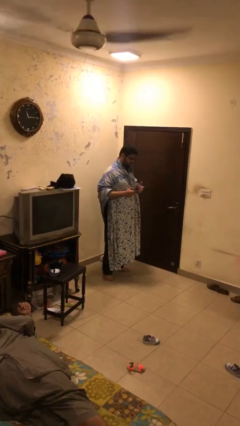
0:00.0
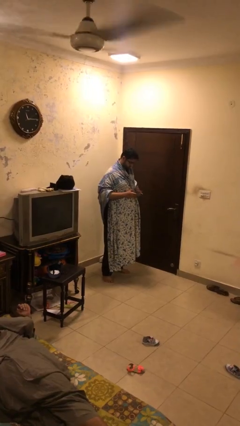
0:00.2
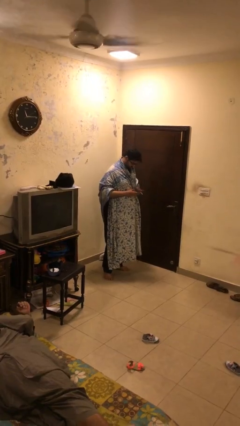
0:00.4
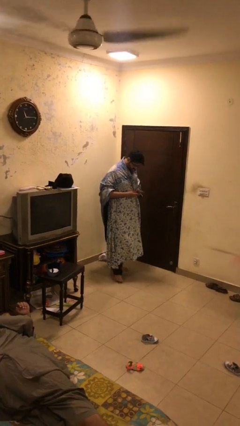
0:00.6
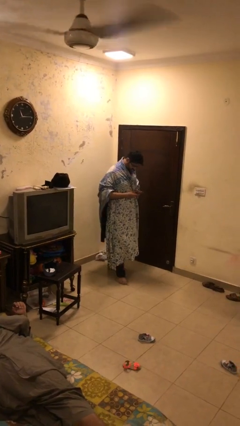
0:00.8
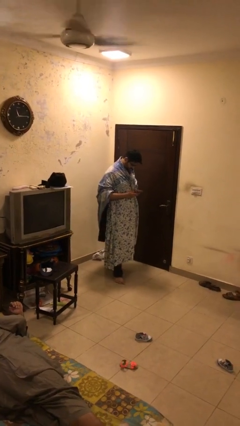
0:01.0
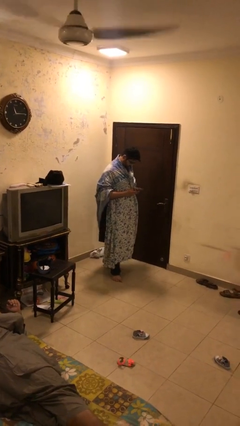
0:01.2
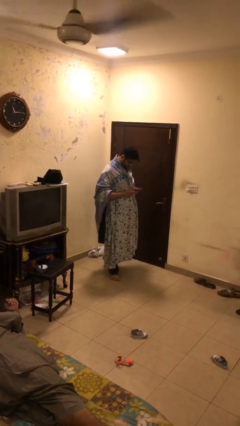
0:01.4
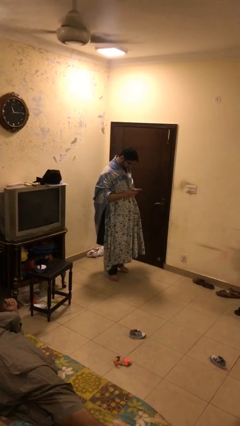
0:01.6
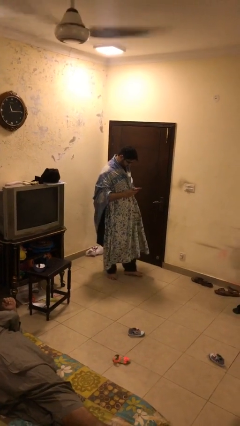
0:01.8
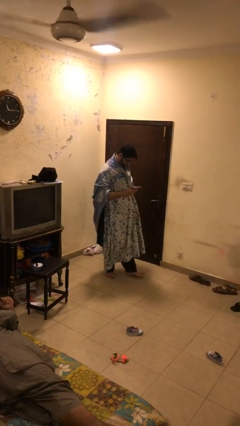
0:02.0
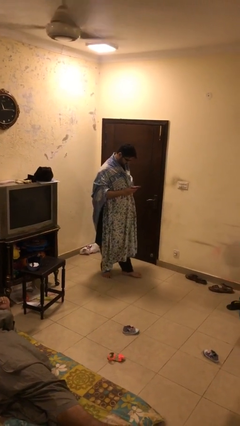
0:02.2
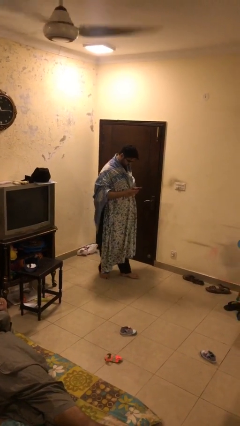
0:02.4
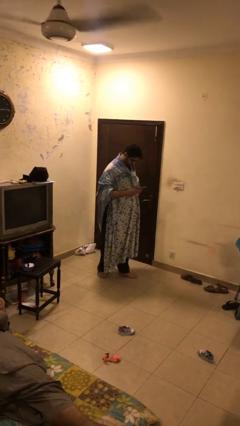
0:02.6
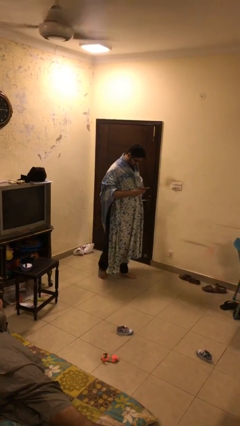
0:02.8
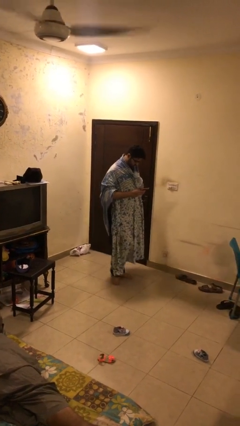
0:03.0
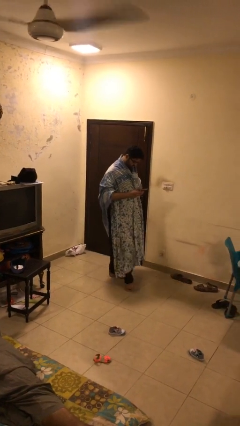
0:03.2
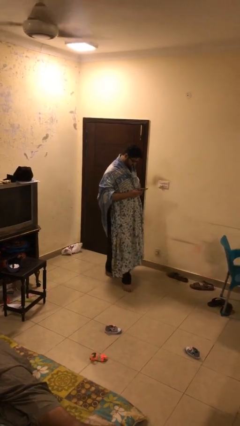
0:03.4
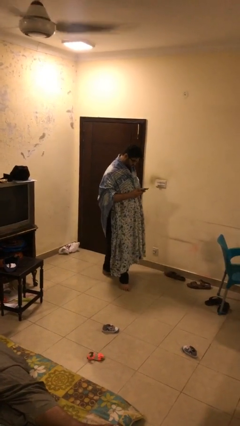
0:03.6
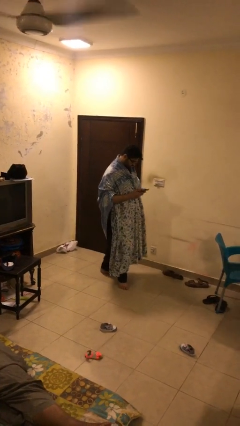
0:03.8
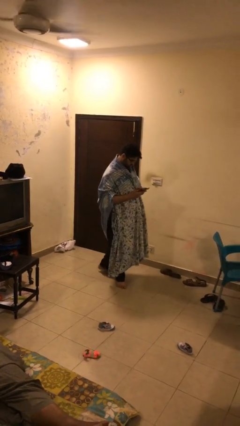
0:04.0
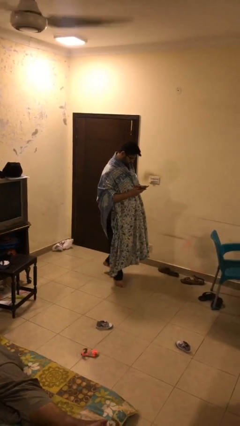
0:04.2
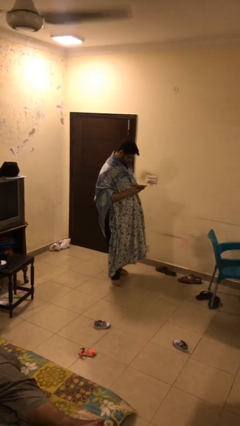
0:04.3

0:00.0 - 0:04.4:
person texts on phone

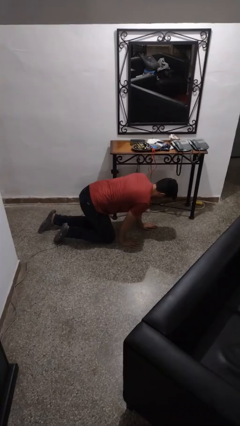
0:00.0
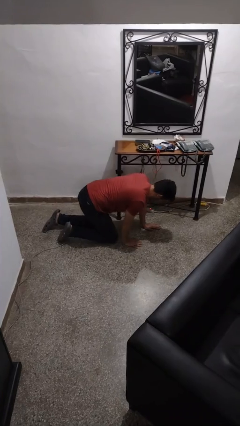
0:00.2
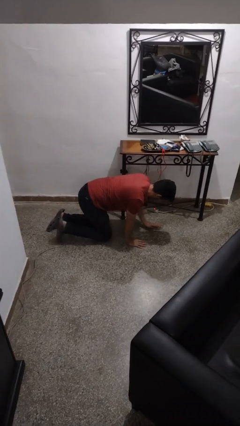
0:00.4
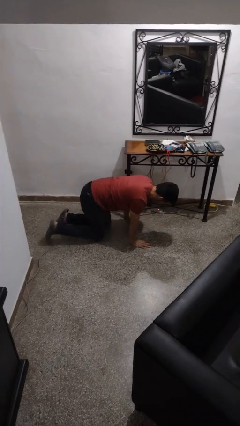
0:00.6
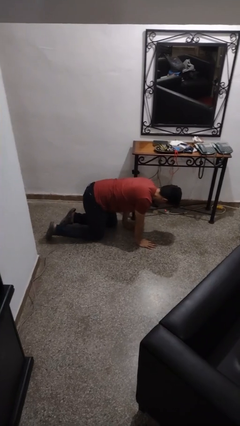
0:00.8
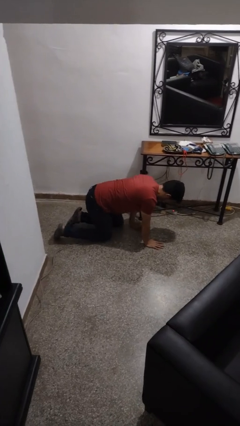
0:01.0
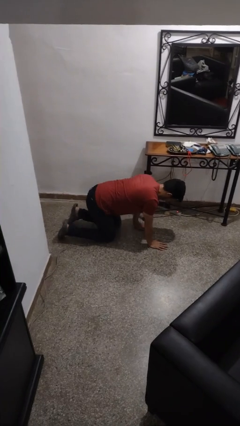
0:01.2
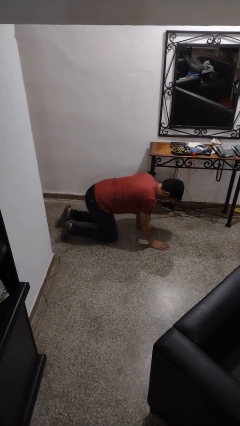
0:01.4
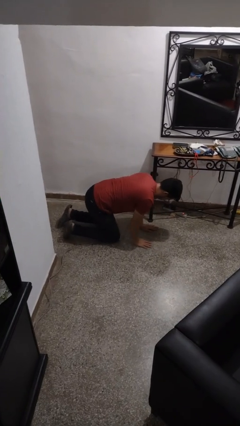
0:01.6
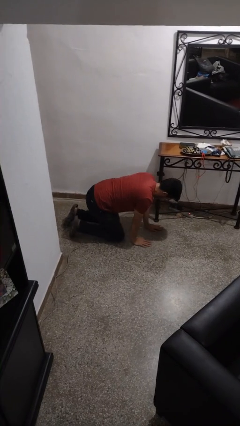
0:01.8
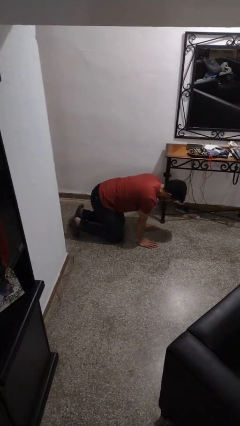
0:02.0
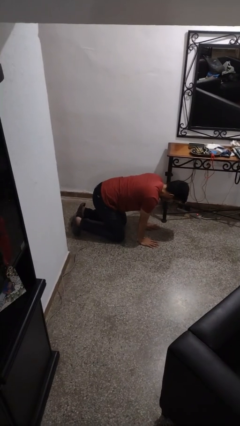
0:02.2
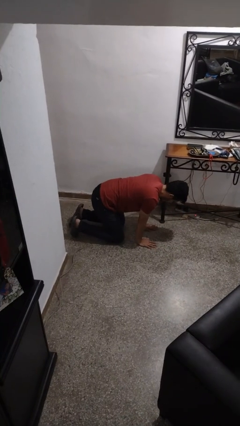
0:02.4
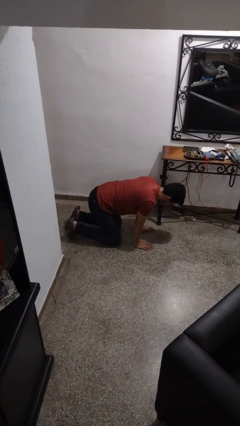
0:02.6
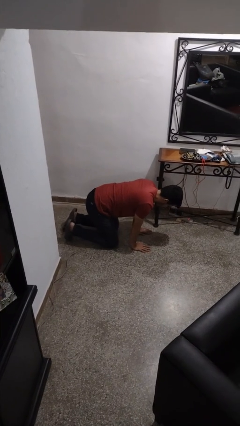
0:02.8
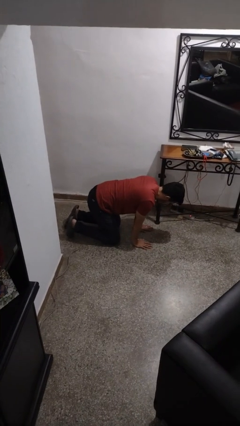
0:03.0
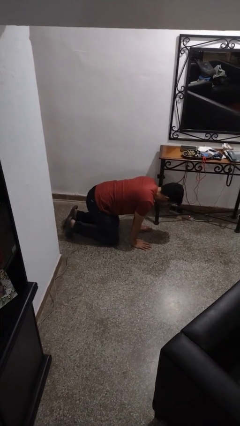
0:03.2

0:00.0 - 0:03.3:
person crawls

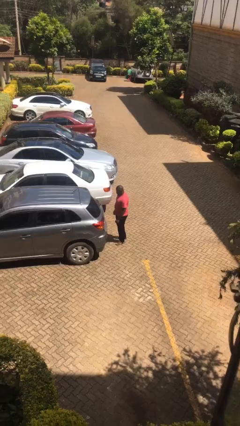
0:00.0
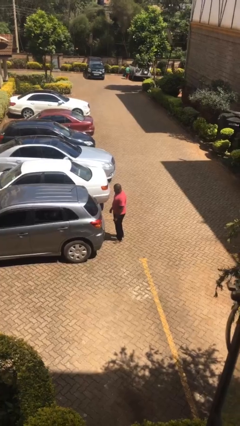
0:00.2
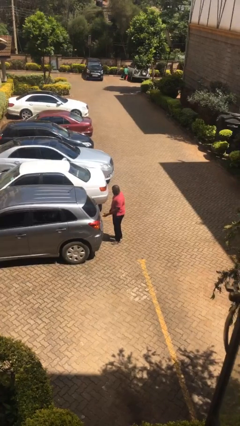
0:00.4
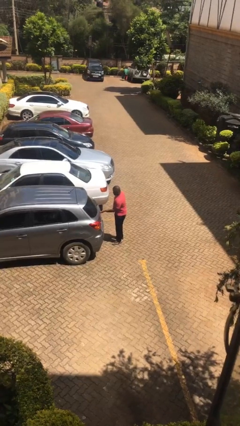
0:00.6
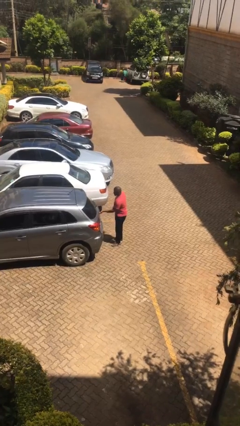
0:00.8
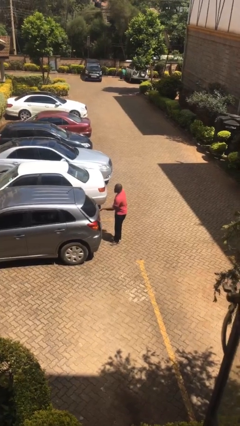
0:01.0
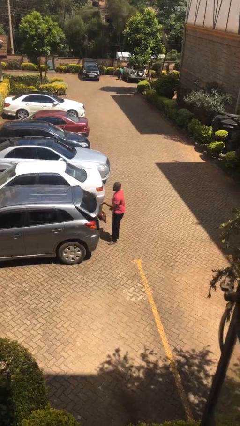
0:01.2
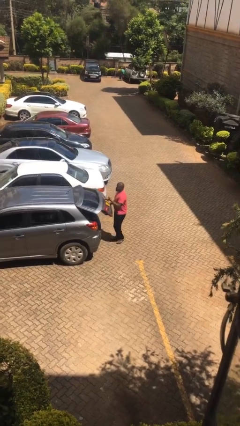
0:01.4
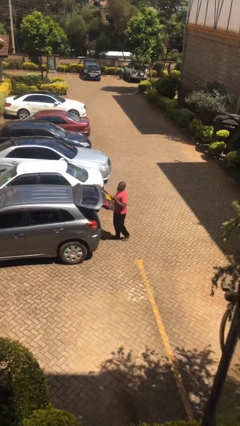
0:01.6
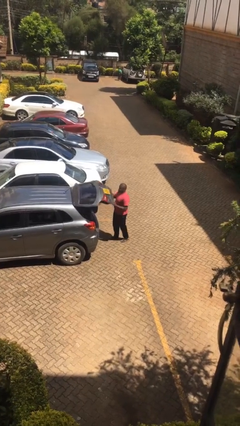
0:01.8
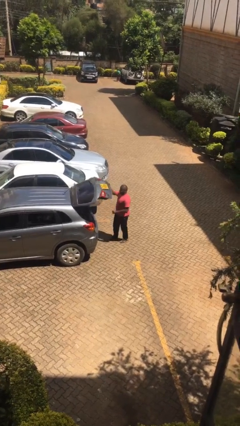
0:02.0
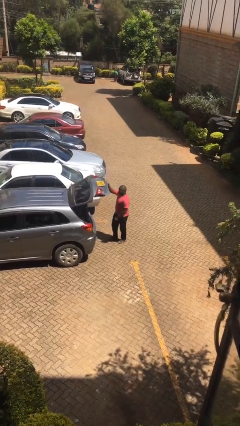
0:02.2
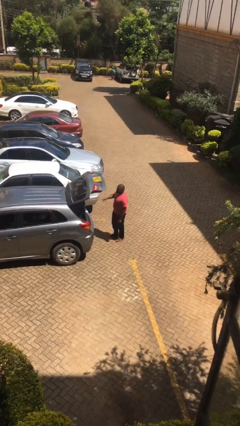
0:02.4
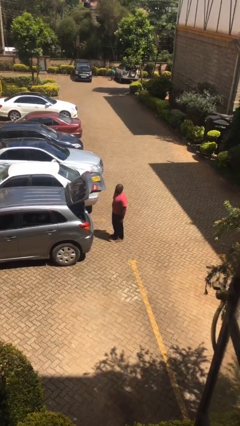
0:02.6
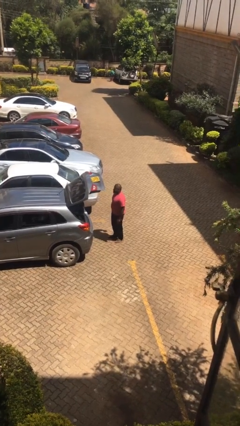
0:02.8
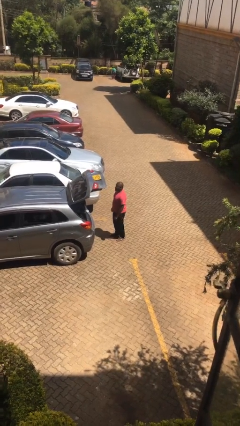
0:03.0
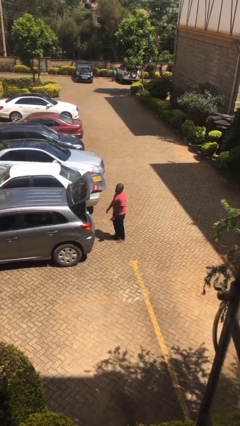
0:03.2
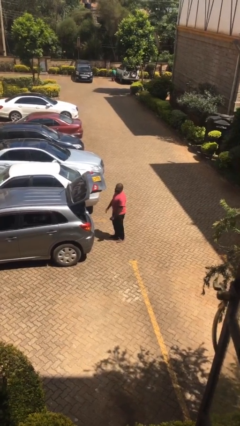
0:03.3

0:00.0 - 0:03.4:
person opens car trunk

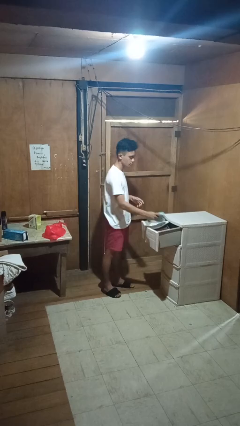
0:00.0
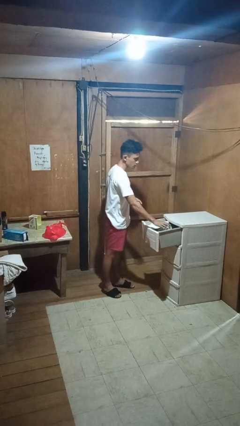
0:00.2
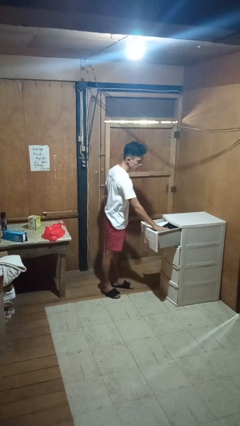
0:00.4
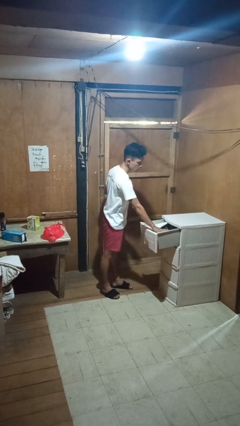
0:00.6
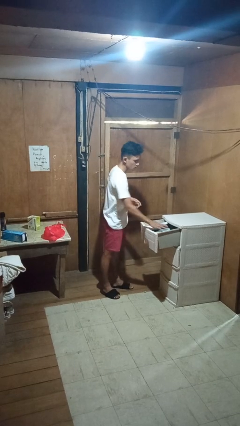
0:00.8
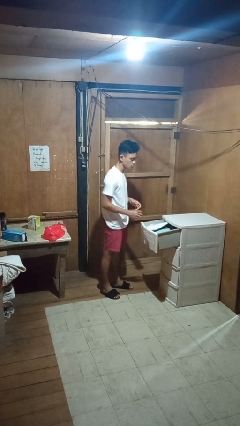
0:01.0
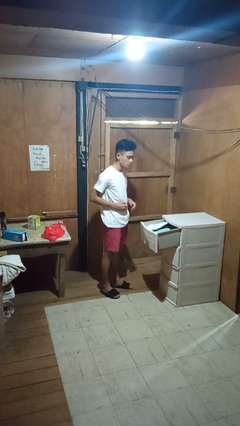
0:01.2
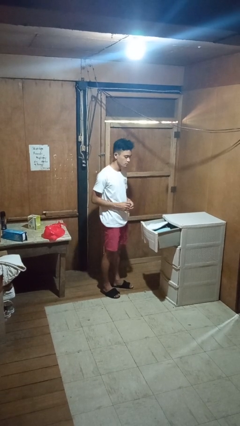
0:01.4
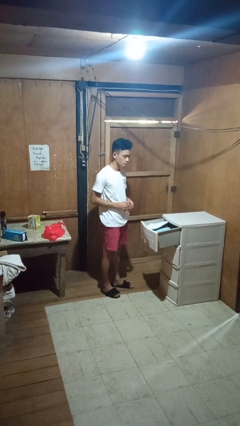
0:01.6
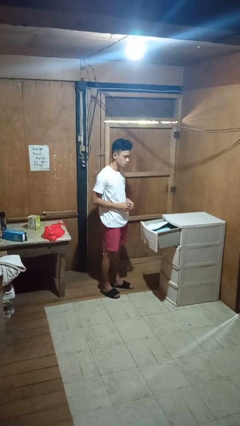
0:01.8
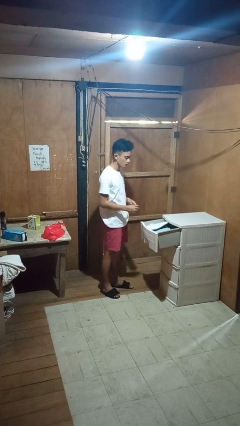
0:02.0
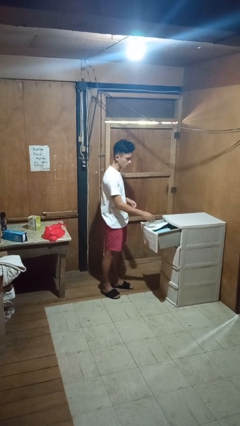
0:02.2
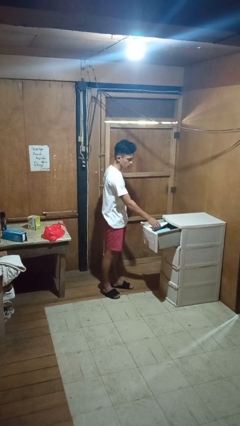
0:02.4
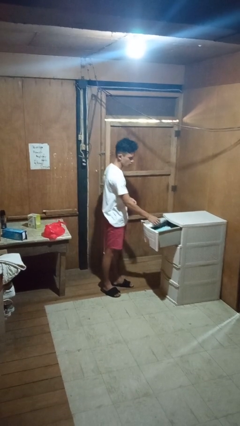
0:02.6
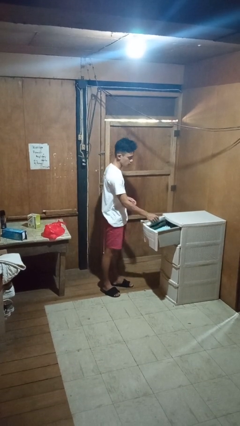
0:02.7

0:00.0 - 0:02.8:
person puts clothes into dresser

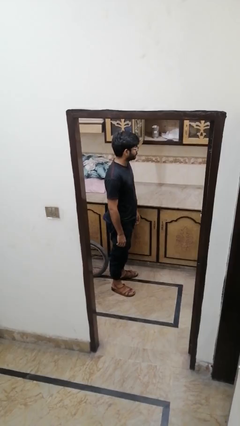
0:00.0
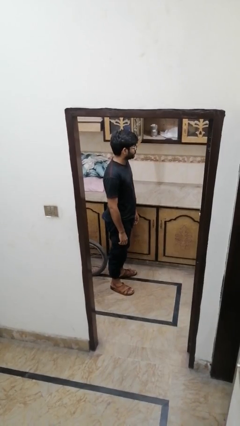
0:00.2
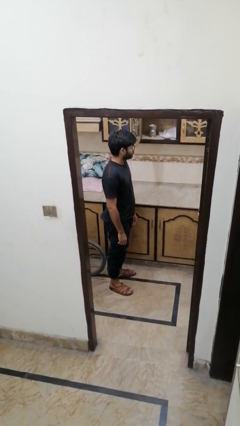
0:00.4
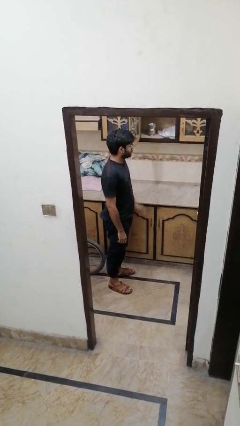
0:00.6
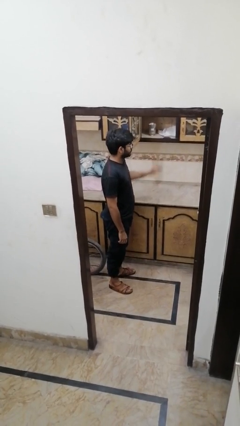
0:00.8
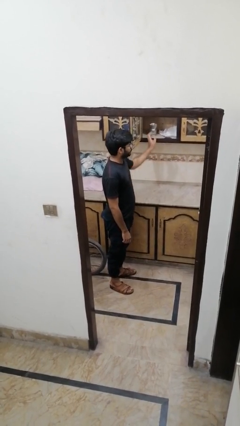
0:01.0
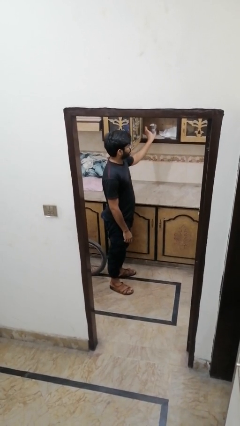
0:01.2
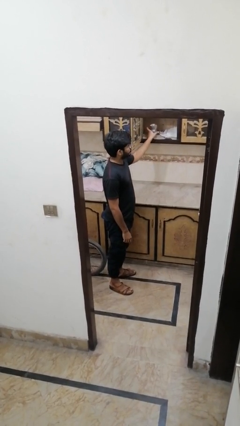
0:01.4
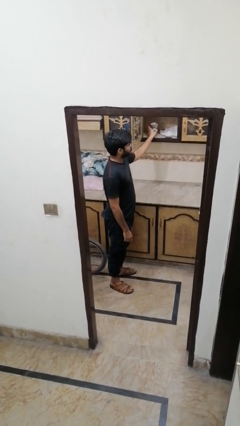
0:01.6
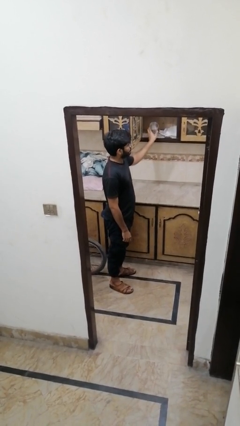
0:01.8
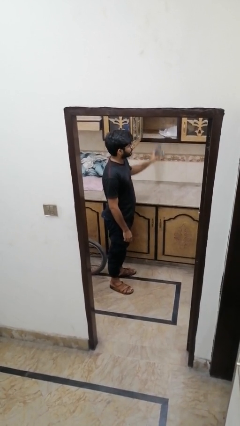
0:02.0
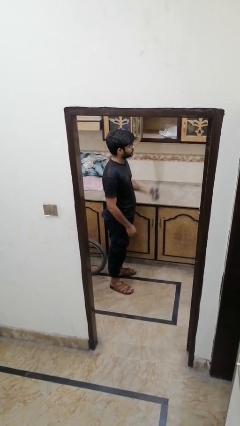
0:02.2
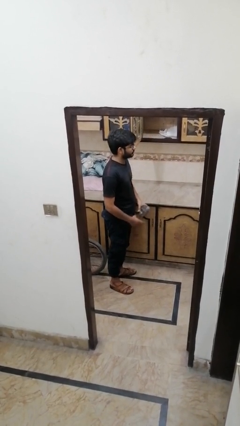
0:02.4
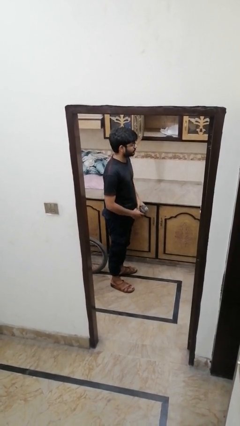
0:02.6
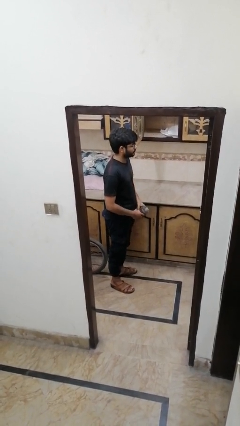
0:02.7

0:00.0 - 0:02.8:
person picks up object from cabinet

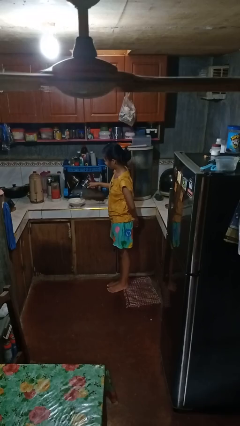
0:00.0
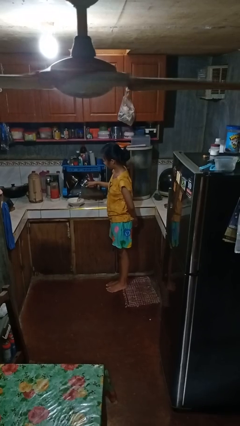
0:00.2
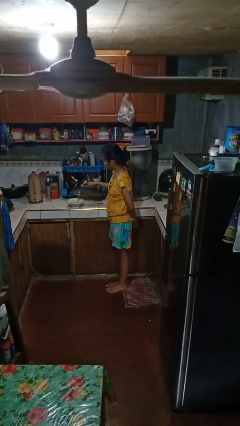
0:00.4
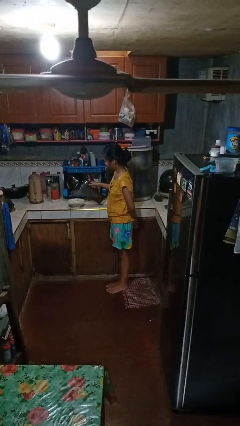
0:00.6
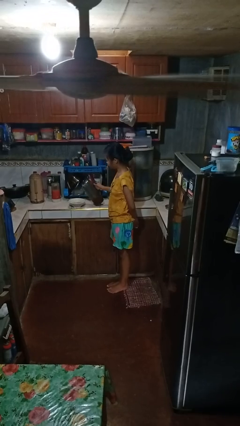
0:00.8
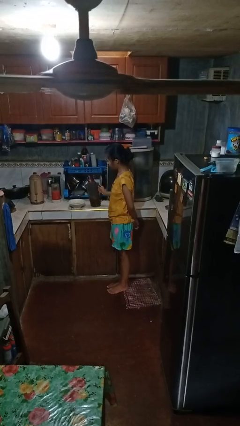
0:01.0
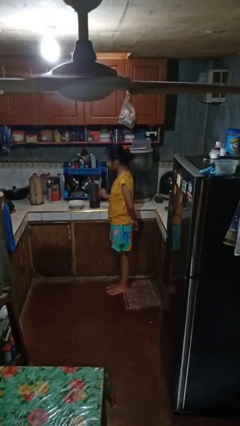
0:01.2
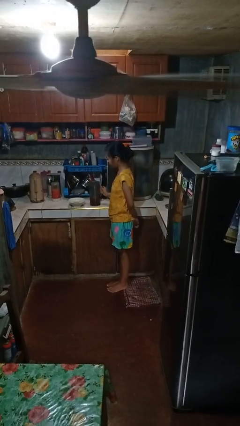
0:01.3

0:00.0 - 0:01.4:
person pours into bowl
